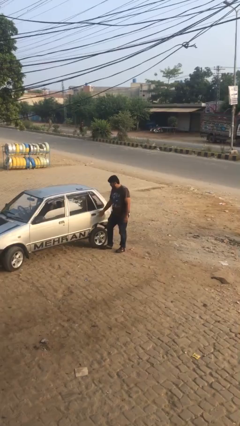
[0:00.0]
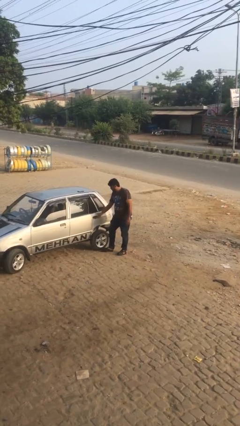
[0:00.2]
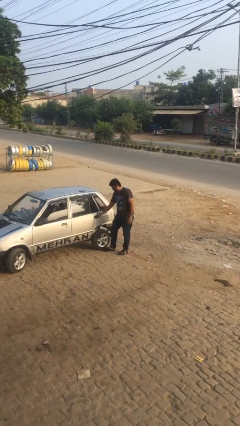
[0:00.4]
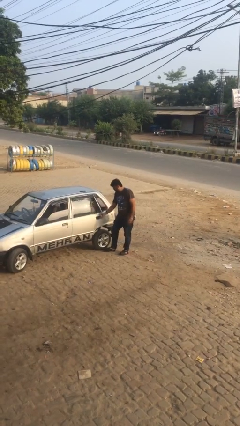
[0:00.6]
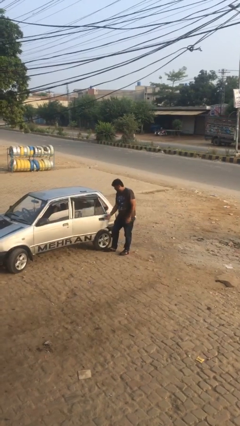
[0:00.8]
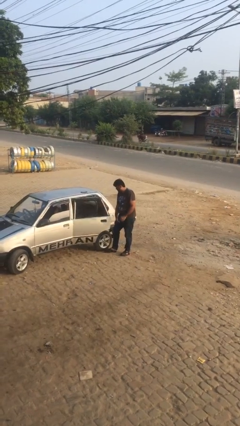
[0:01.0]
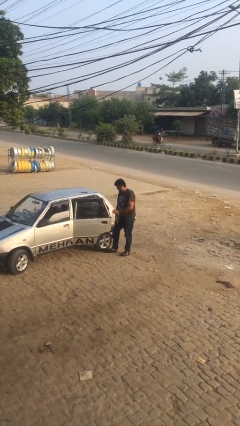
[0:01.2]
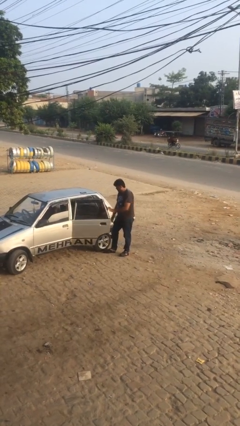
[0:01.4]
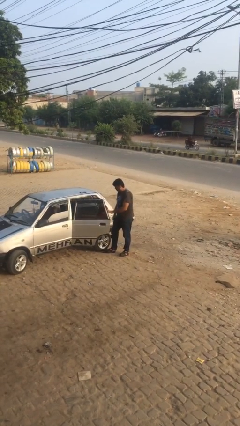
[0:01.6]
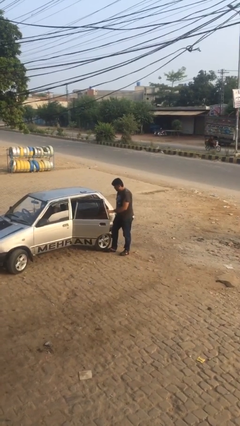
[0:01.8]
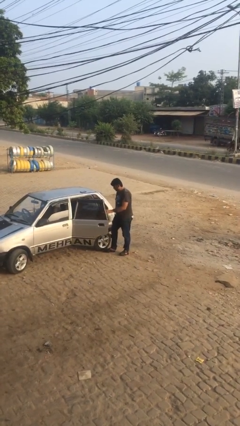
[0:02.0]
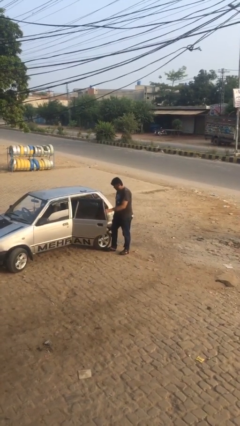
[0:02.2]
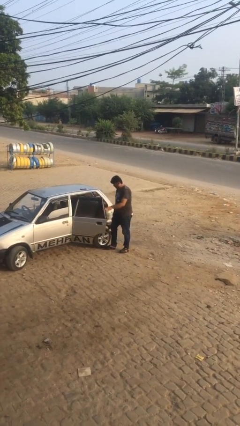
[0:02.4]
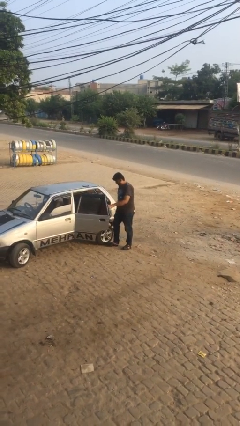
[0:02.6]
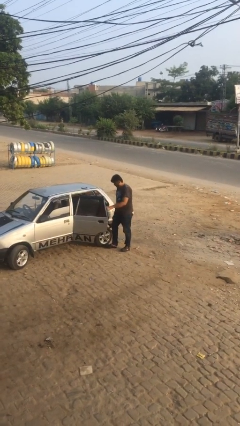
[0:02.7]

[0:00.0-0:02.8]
person opens car door

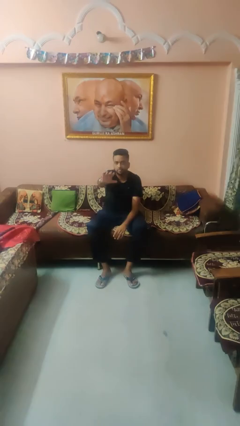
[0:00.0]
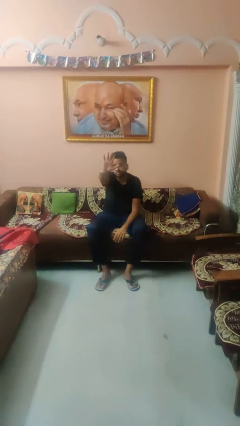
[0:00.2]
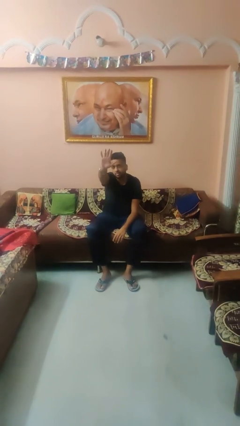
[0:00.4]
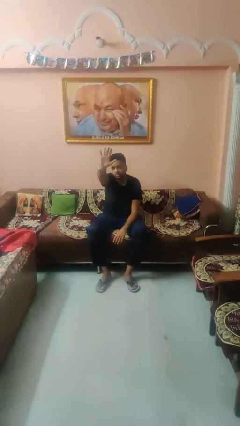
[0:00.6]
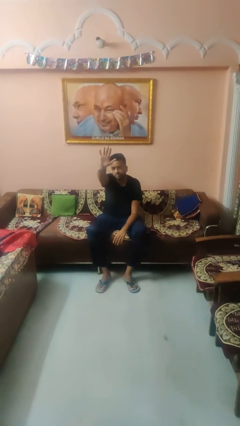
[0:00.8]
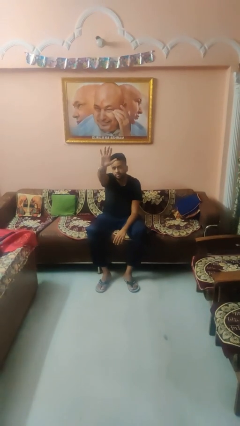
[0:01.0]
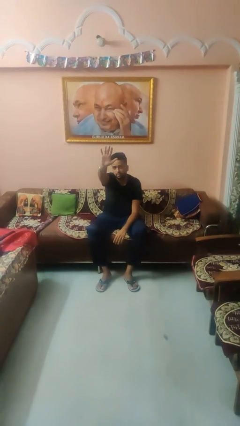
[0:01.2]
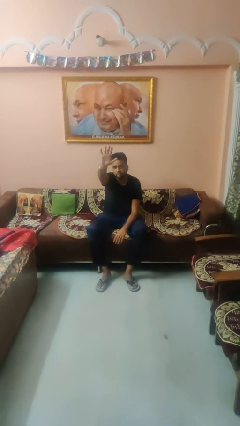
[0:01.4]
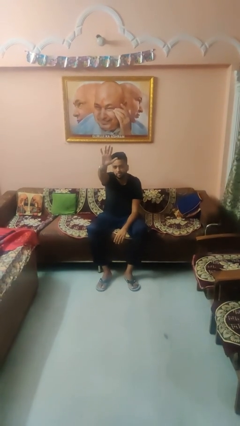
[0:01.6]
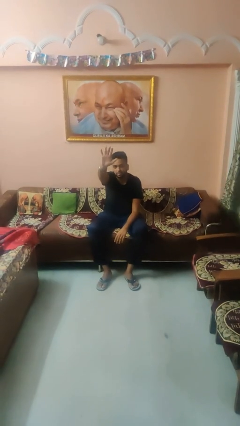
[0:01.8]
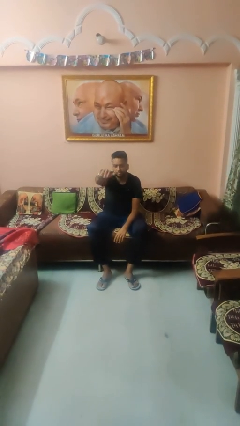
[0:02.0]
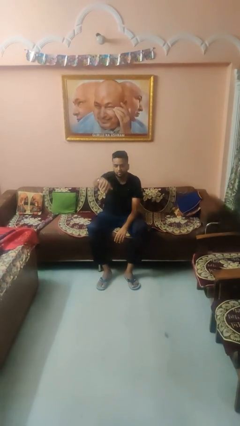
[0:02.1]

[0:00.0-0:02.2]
person gestures number five

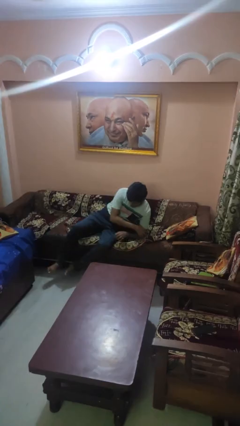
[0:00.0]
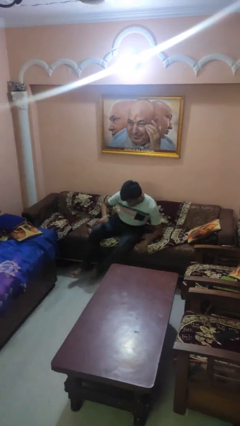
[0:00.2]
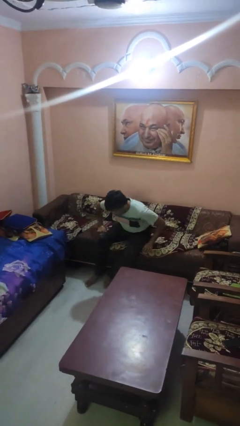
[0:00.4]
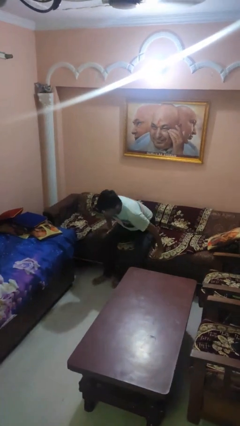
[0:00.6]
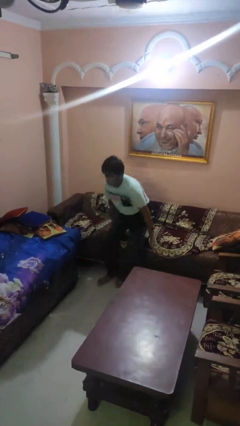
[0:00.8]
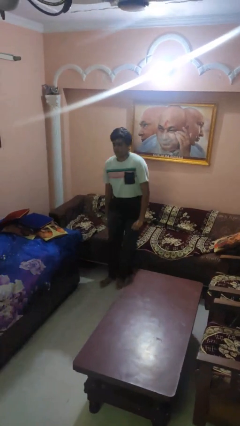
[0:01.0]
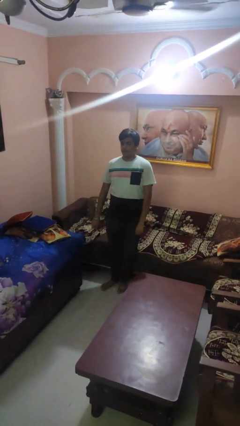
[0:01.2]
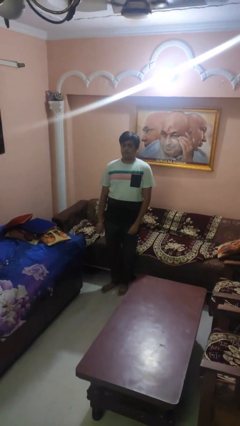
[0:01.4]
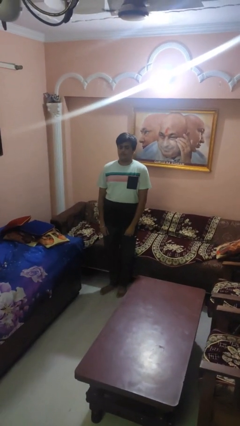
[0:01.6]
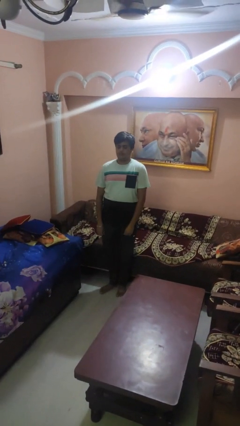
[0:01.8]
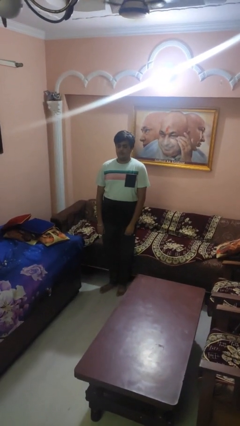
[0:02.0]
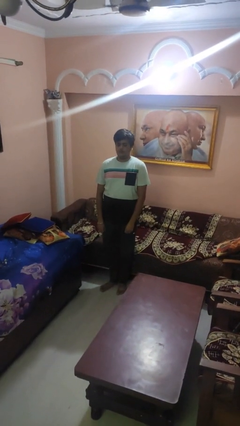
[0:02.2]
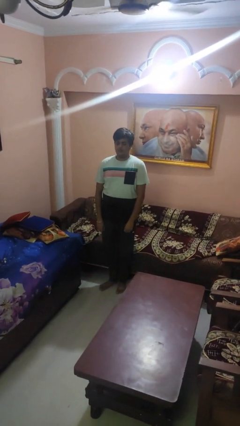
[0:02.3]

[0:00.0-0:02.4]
person stands up

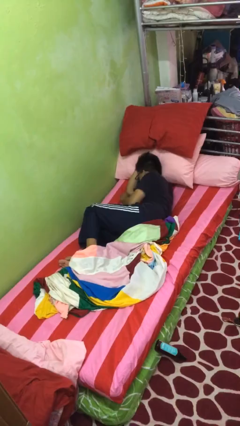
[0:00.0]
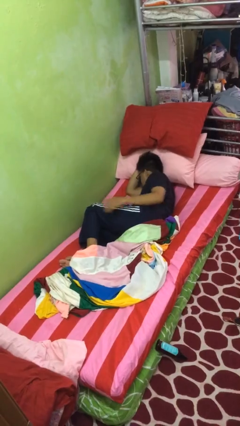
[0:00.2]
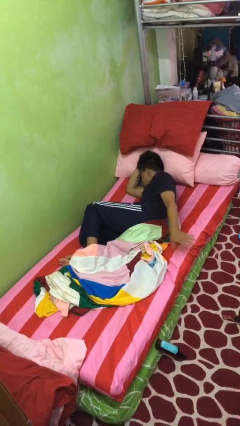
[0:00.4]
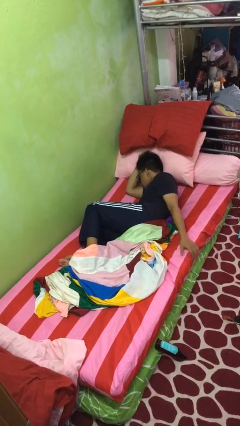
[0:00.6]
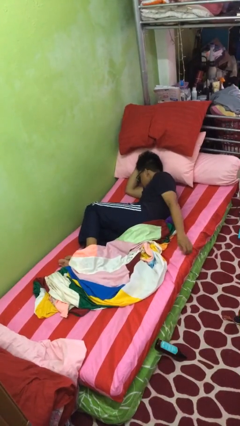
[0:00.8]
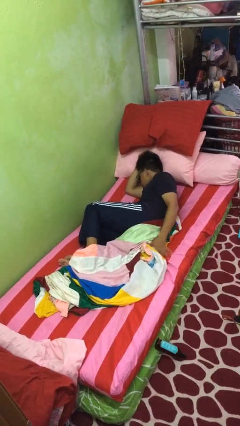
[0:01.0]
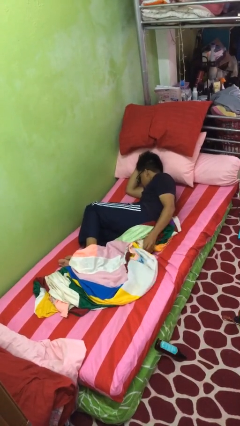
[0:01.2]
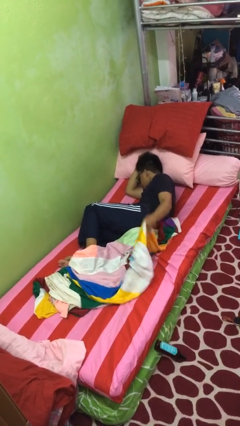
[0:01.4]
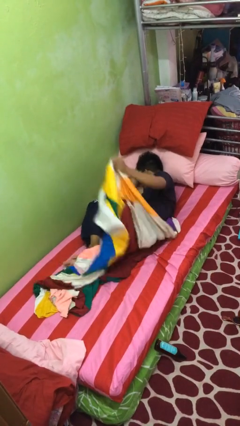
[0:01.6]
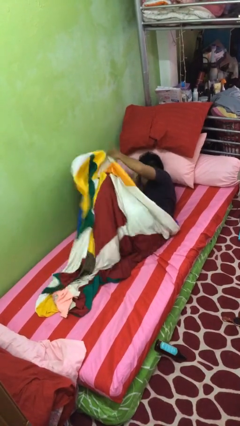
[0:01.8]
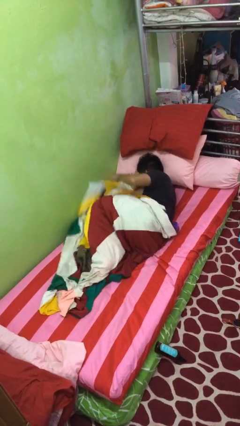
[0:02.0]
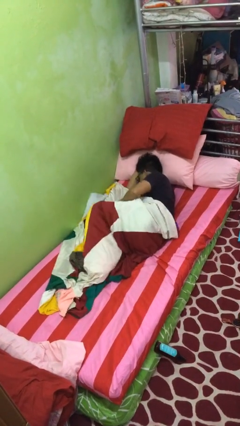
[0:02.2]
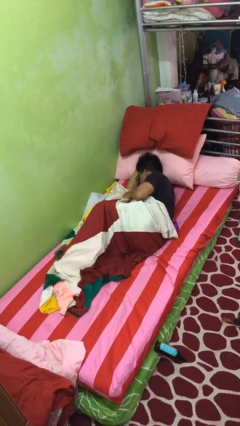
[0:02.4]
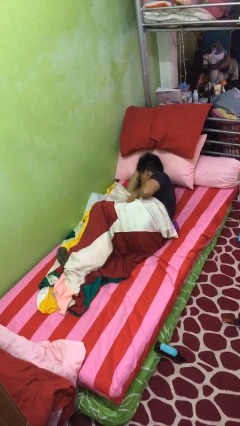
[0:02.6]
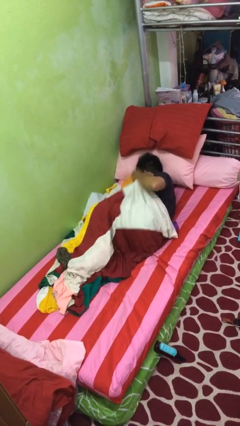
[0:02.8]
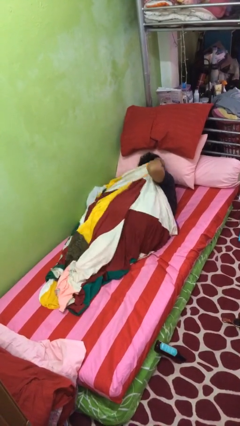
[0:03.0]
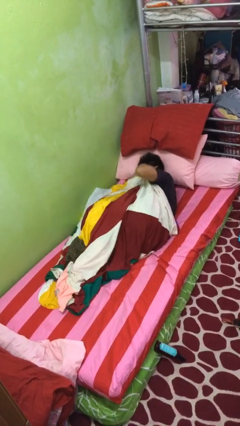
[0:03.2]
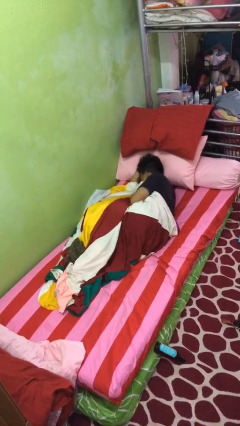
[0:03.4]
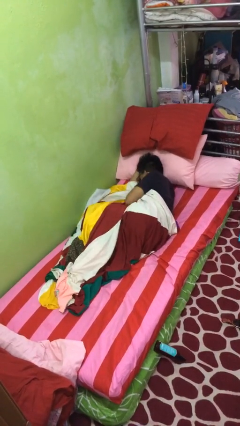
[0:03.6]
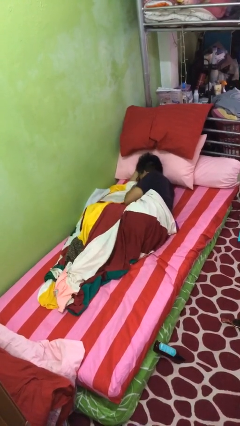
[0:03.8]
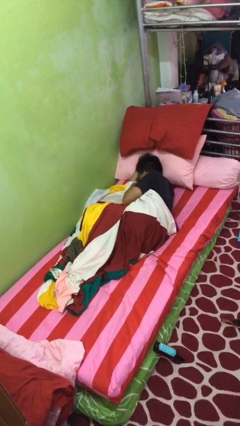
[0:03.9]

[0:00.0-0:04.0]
person covers with blanket

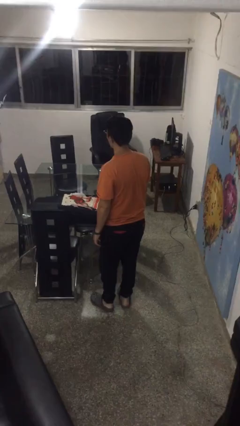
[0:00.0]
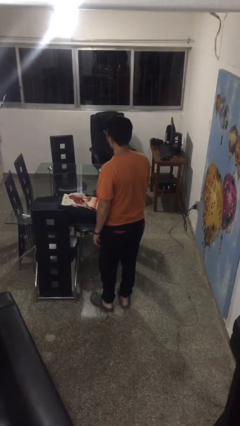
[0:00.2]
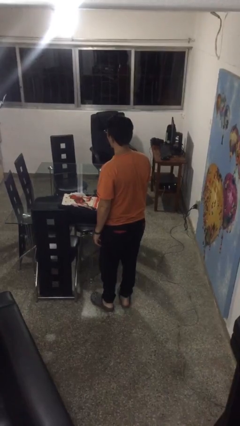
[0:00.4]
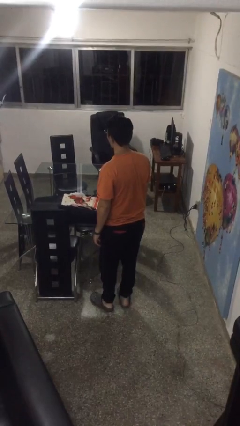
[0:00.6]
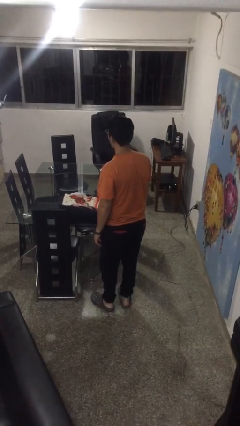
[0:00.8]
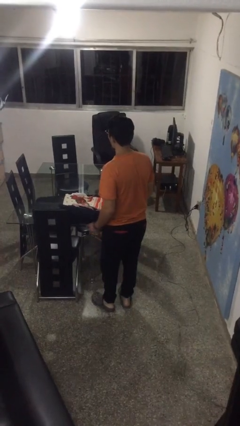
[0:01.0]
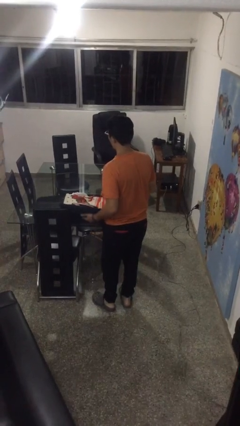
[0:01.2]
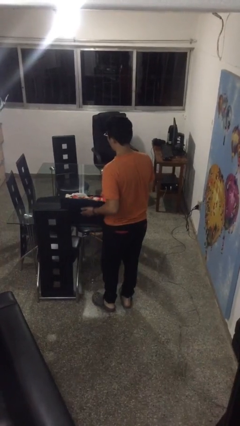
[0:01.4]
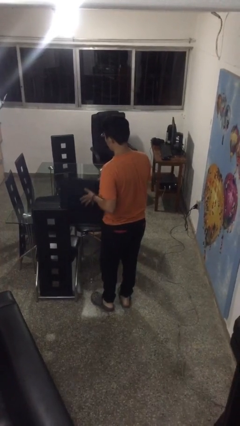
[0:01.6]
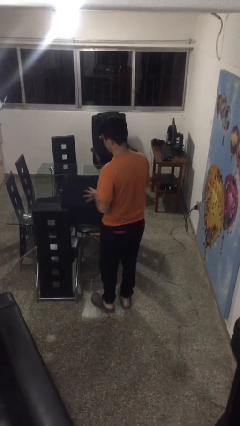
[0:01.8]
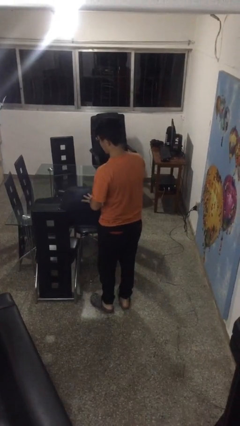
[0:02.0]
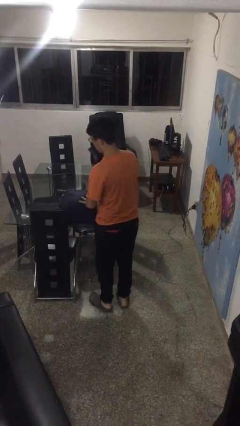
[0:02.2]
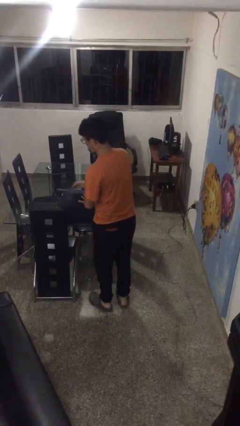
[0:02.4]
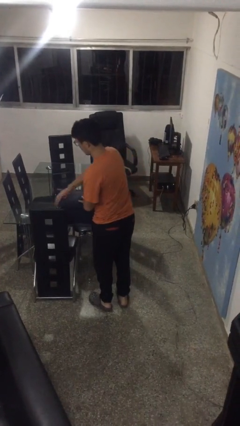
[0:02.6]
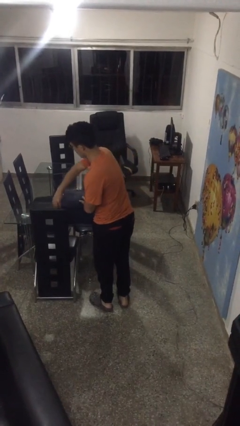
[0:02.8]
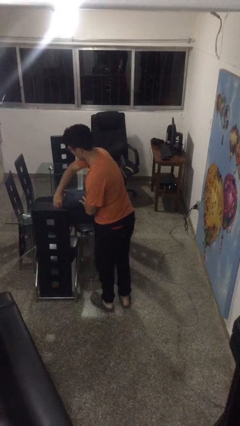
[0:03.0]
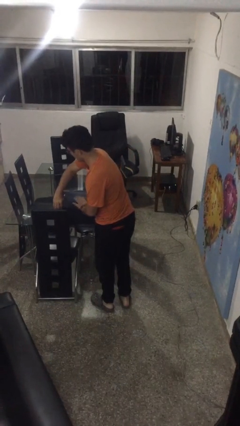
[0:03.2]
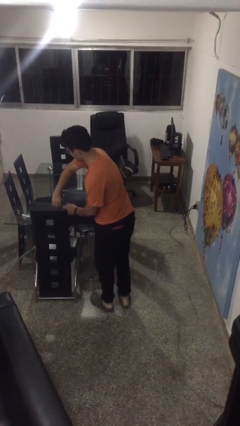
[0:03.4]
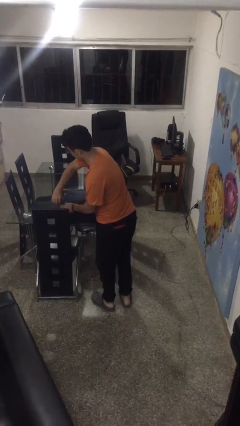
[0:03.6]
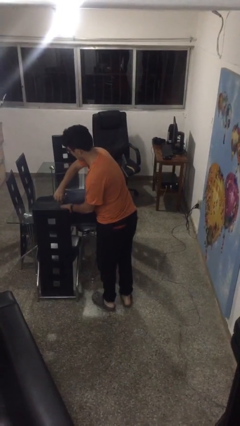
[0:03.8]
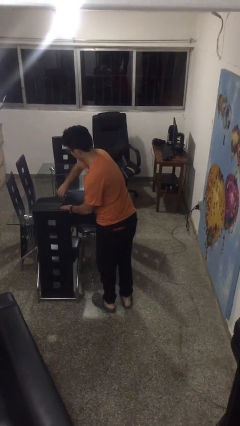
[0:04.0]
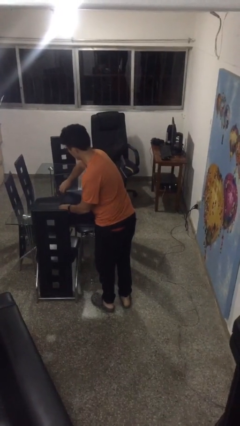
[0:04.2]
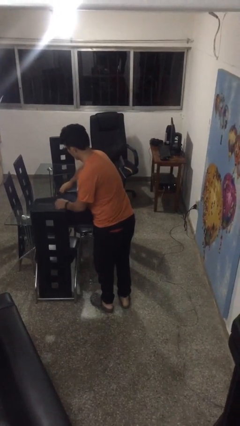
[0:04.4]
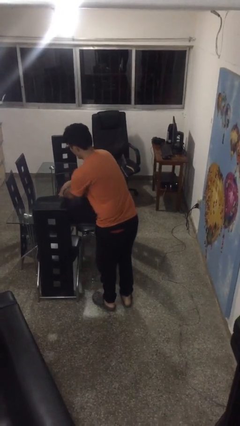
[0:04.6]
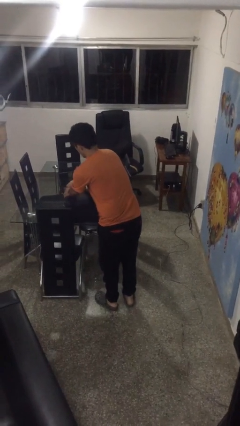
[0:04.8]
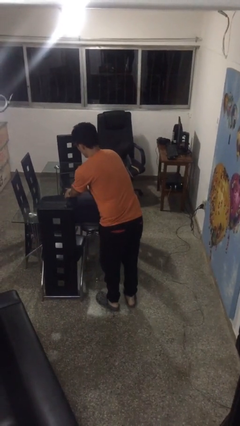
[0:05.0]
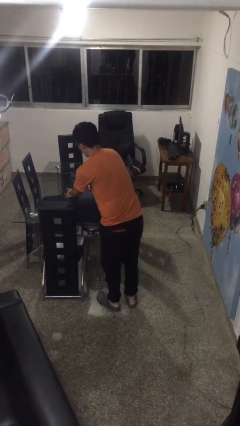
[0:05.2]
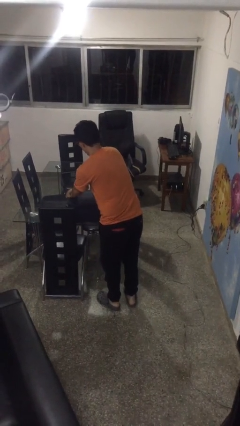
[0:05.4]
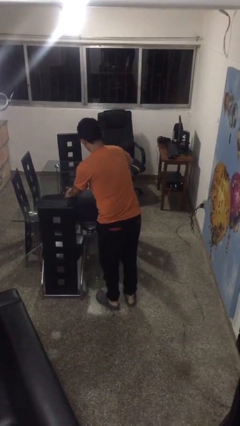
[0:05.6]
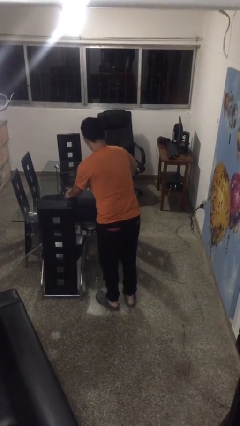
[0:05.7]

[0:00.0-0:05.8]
person closes suitcase
